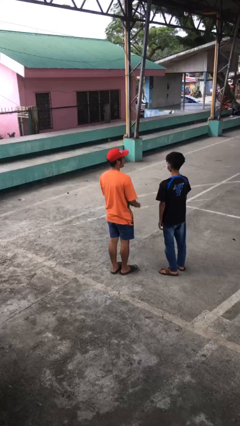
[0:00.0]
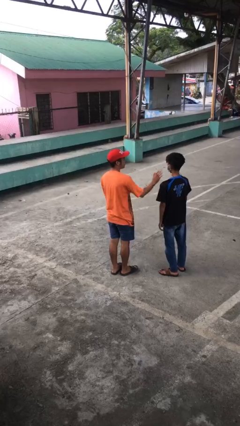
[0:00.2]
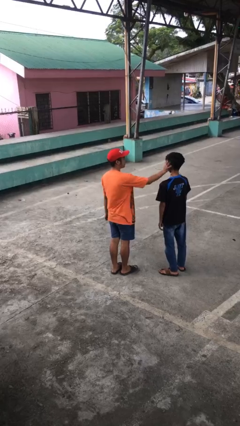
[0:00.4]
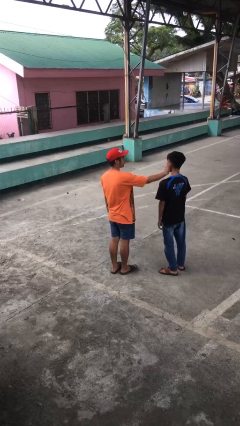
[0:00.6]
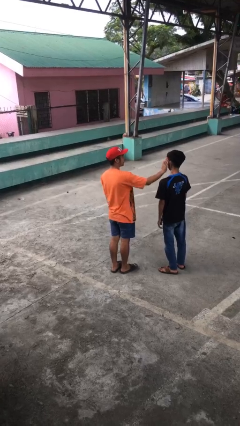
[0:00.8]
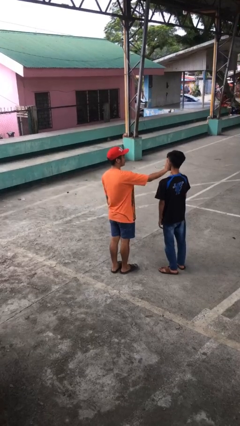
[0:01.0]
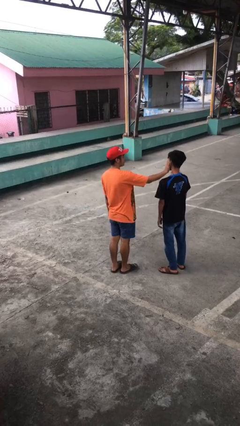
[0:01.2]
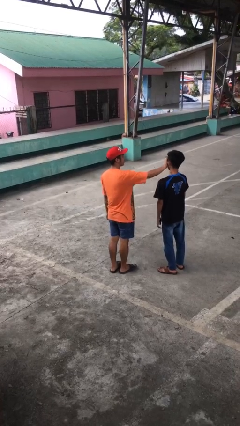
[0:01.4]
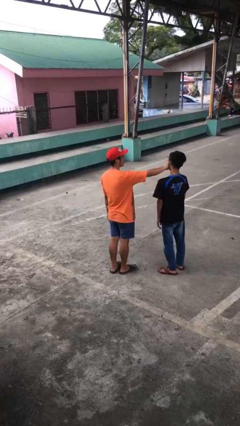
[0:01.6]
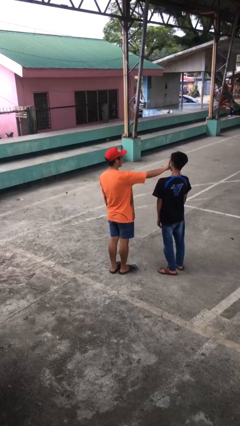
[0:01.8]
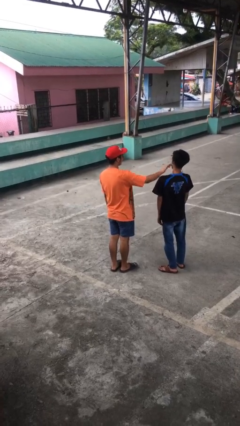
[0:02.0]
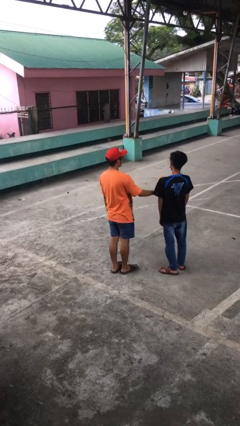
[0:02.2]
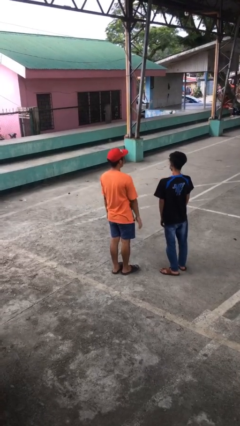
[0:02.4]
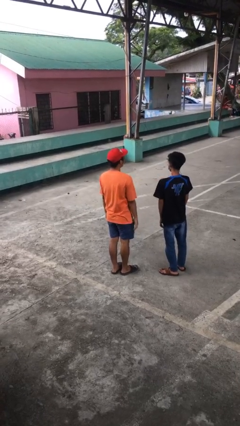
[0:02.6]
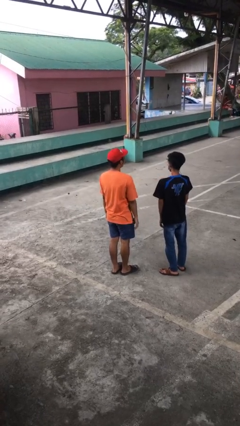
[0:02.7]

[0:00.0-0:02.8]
person touches face of person

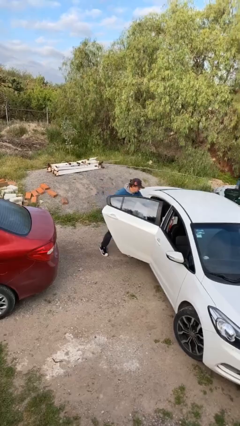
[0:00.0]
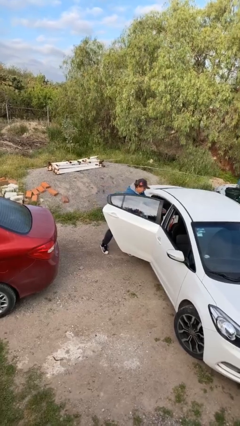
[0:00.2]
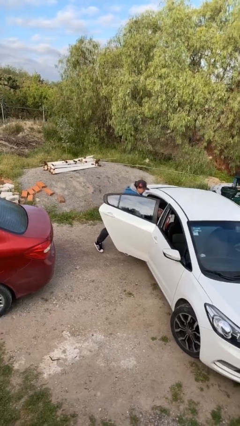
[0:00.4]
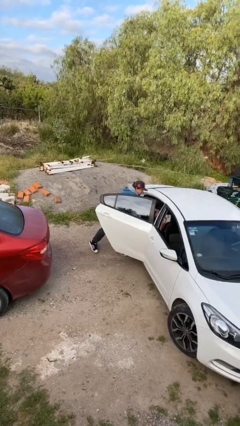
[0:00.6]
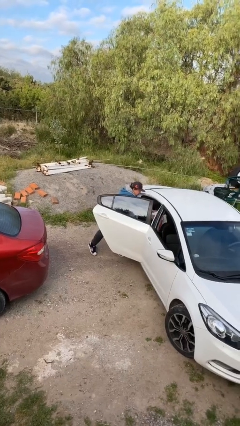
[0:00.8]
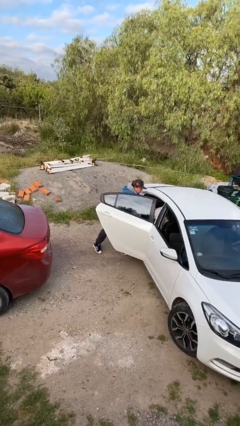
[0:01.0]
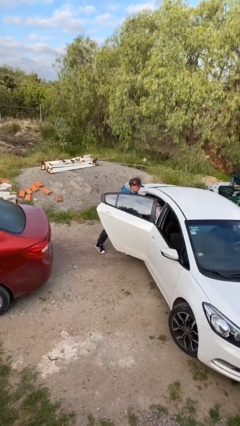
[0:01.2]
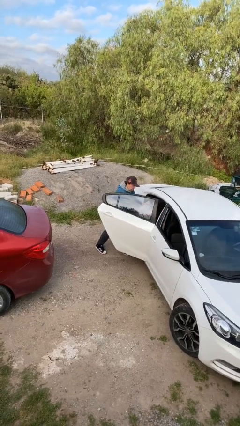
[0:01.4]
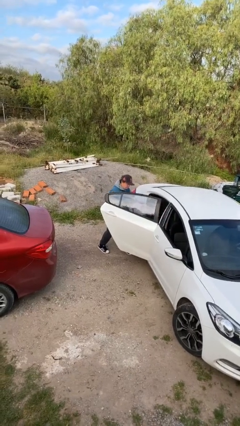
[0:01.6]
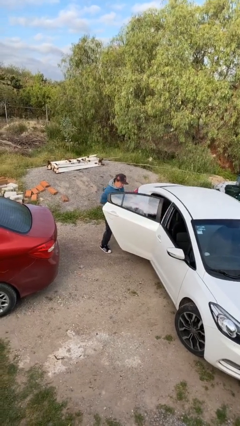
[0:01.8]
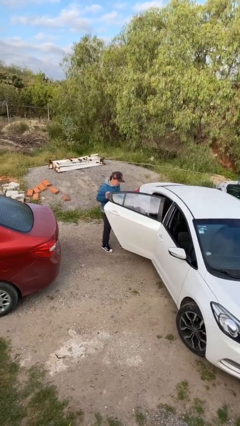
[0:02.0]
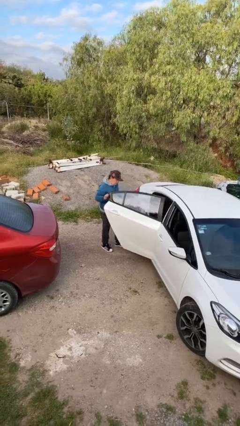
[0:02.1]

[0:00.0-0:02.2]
person unloads car

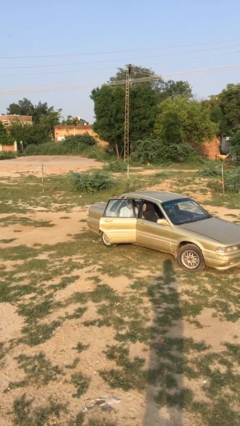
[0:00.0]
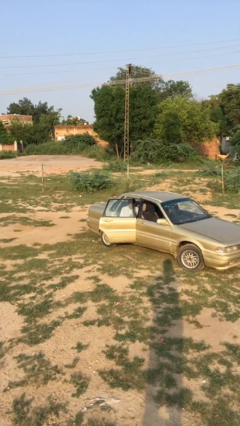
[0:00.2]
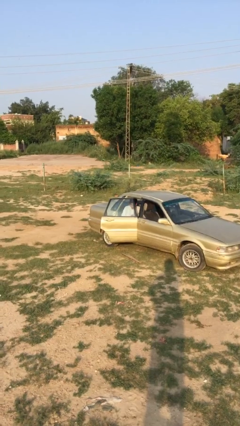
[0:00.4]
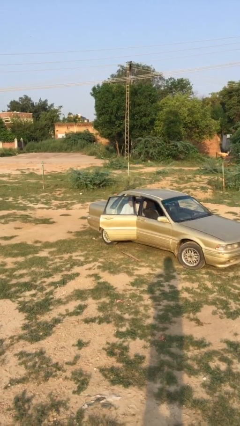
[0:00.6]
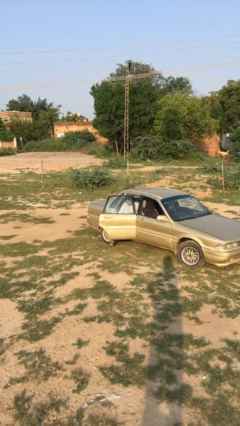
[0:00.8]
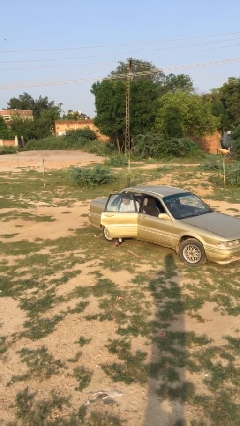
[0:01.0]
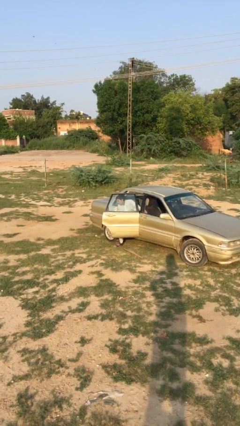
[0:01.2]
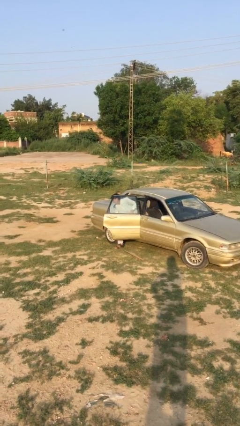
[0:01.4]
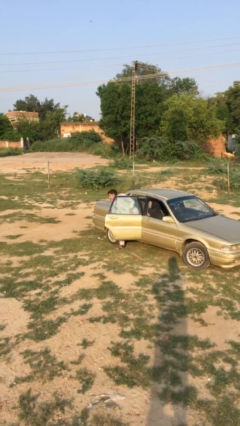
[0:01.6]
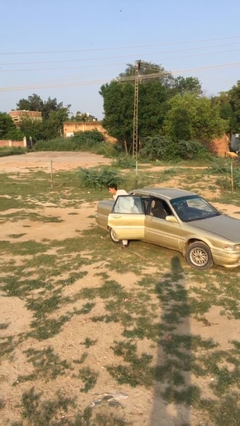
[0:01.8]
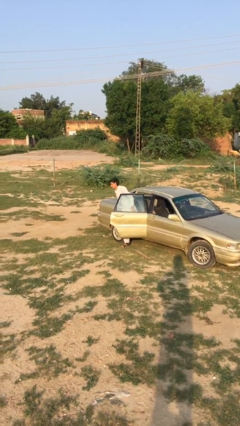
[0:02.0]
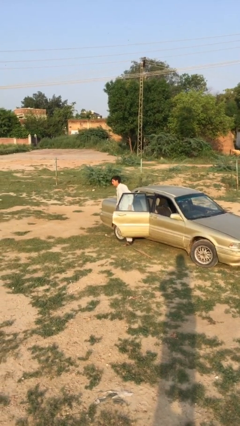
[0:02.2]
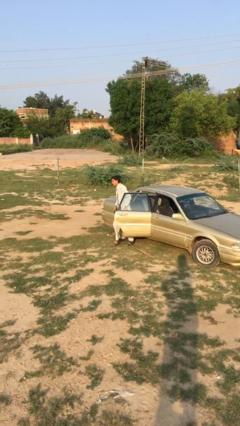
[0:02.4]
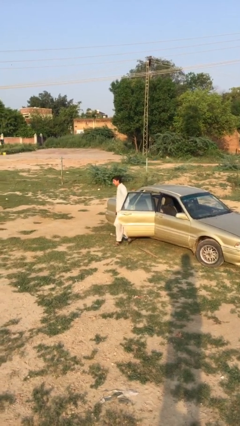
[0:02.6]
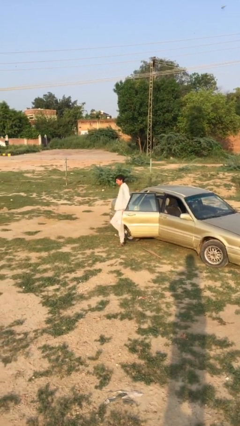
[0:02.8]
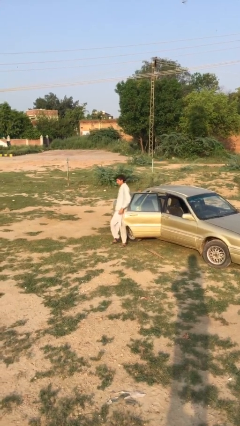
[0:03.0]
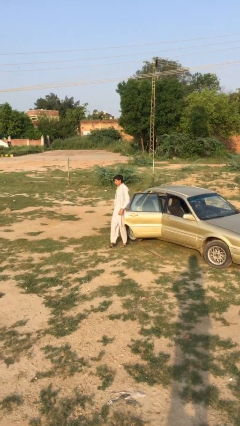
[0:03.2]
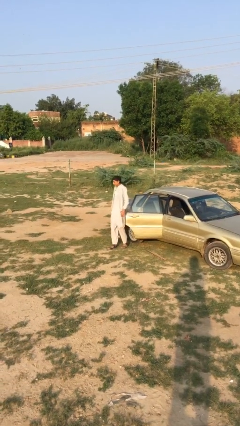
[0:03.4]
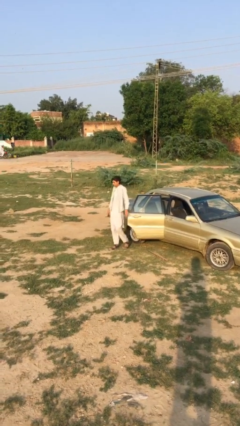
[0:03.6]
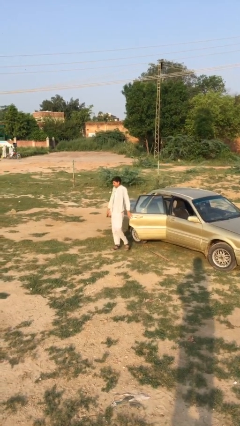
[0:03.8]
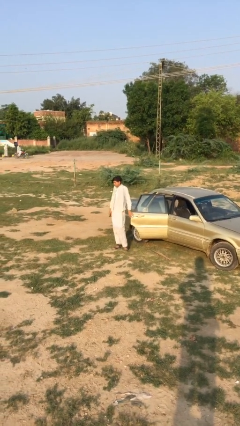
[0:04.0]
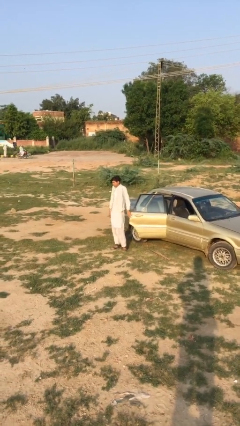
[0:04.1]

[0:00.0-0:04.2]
person exits car

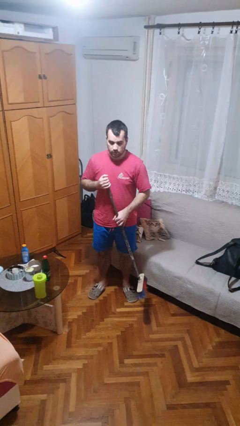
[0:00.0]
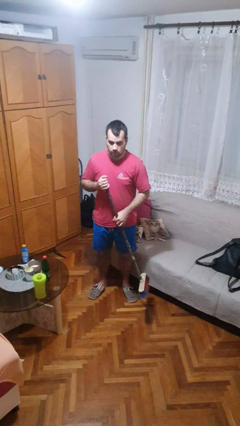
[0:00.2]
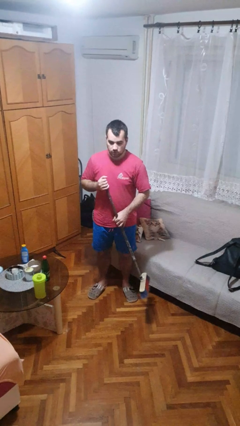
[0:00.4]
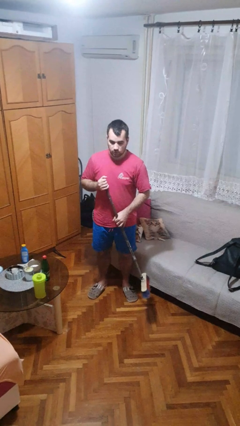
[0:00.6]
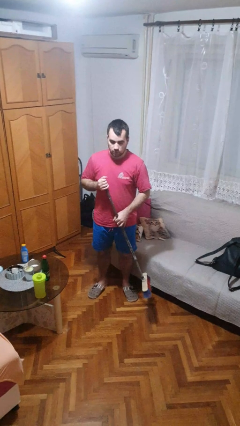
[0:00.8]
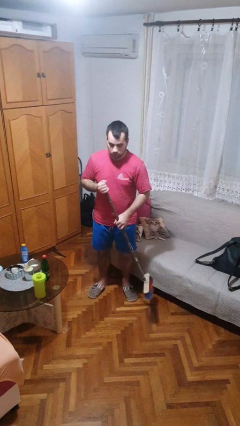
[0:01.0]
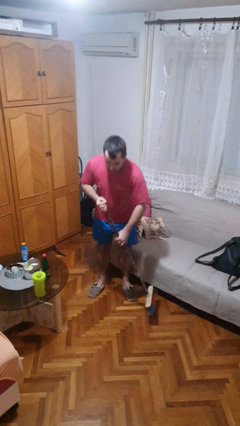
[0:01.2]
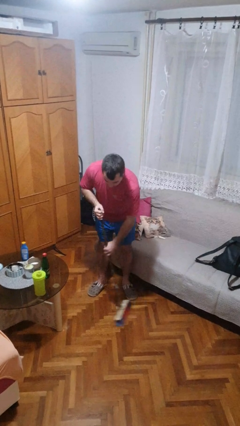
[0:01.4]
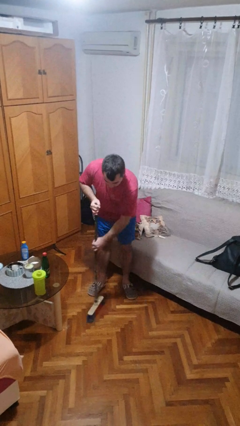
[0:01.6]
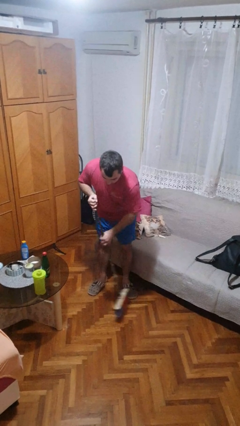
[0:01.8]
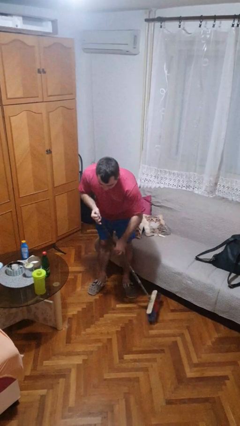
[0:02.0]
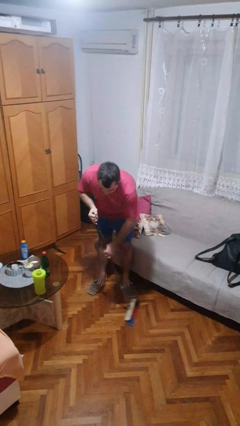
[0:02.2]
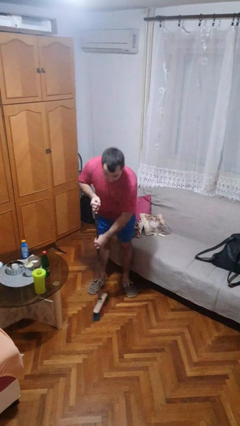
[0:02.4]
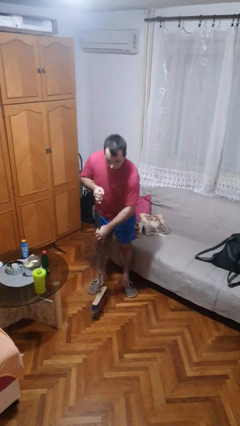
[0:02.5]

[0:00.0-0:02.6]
person sweeps floor

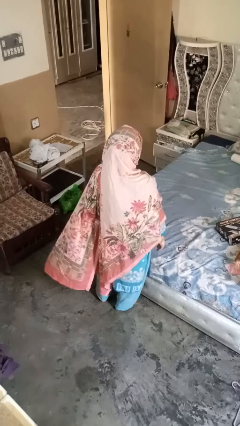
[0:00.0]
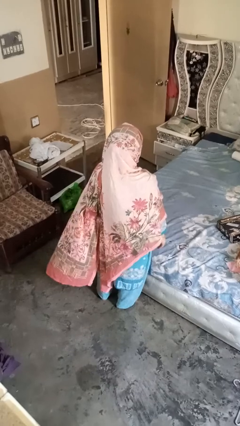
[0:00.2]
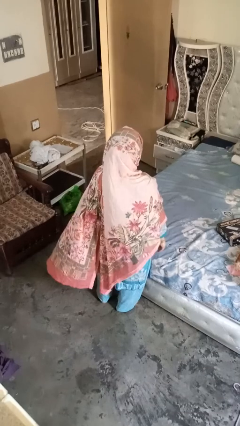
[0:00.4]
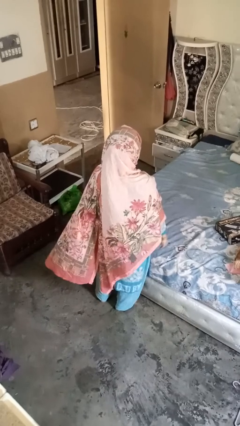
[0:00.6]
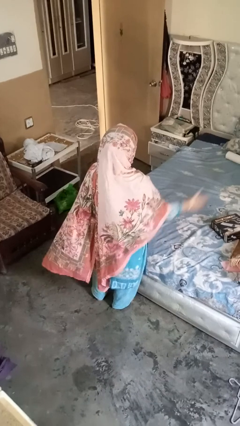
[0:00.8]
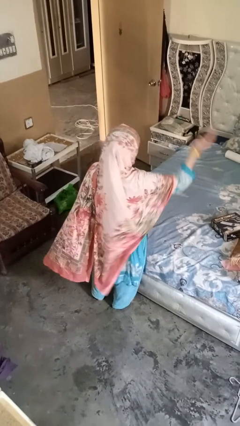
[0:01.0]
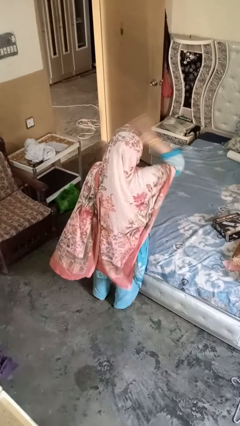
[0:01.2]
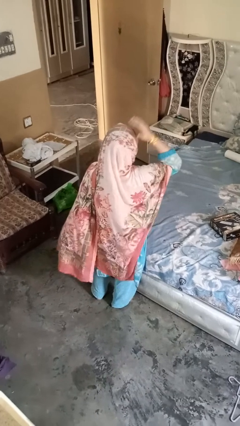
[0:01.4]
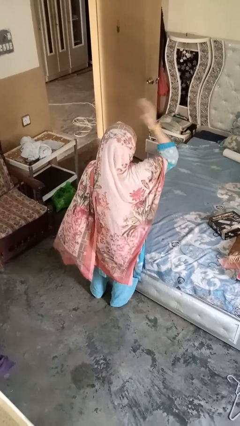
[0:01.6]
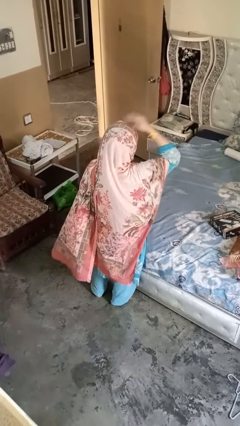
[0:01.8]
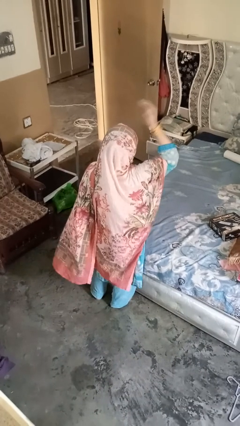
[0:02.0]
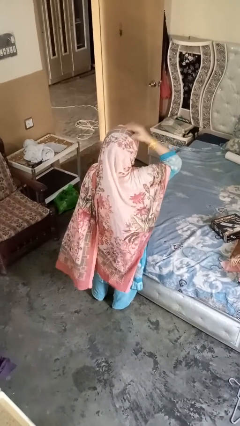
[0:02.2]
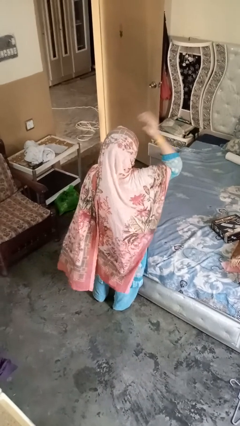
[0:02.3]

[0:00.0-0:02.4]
person pats head

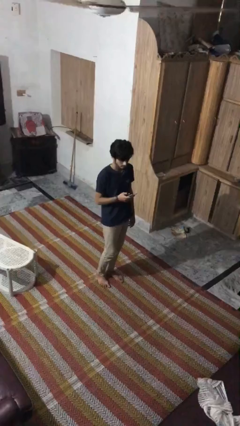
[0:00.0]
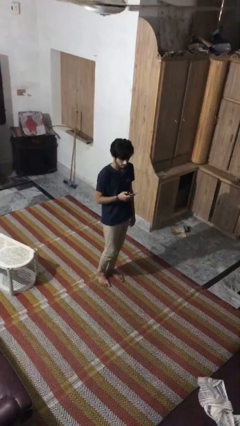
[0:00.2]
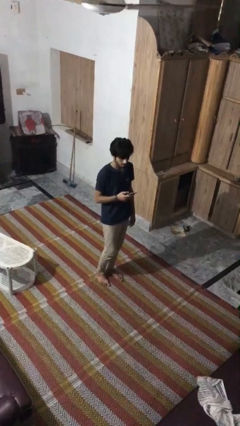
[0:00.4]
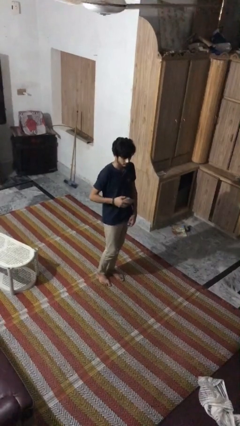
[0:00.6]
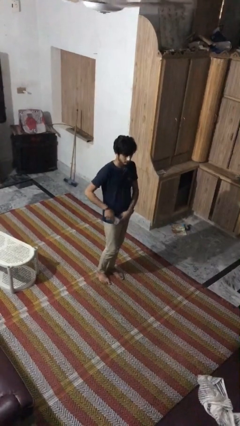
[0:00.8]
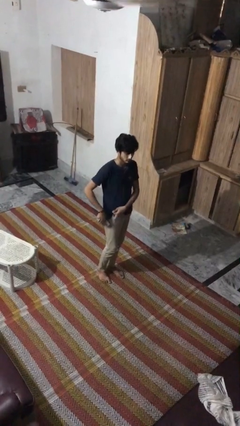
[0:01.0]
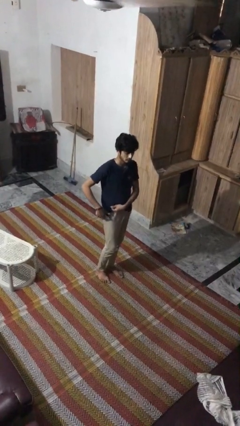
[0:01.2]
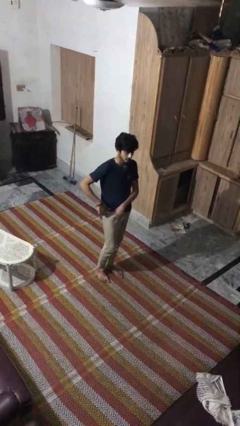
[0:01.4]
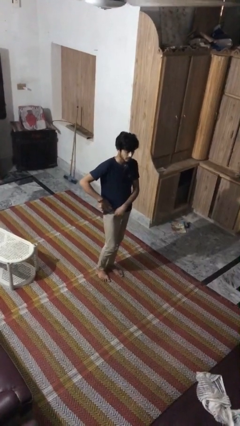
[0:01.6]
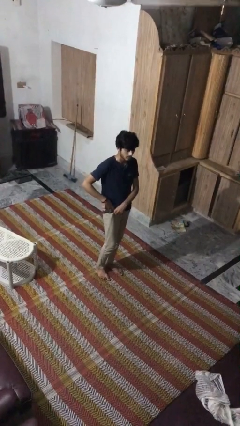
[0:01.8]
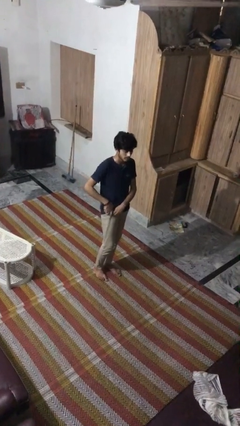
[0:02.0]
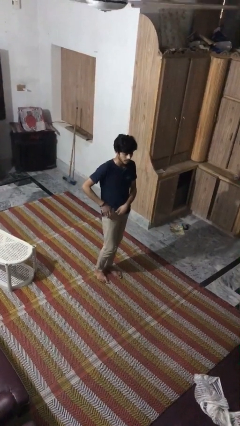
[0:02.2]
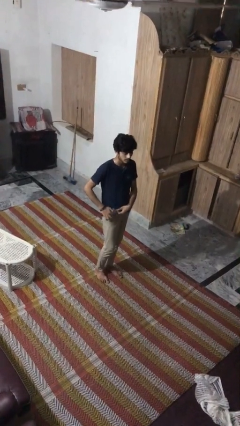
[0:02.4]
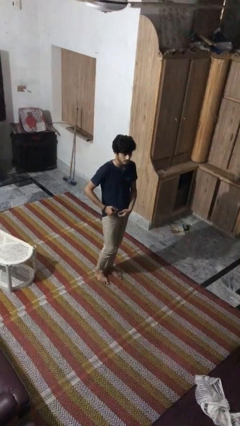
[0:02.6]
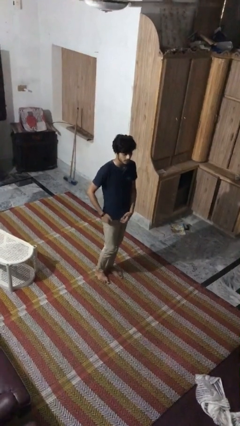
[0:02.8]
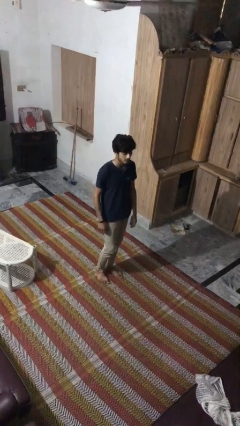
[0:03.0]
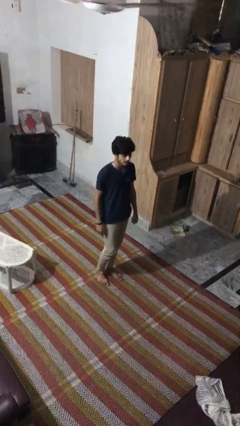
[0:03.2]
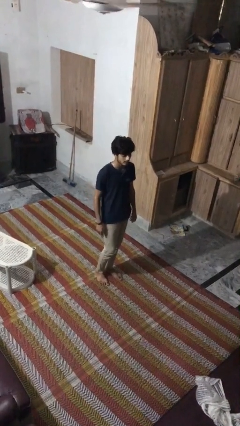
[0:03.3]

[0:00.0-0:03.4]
person puts phone into pocket
